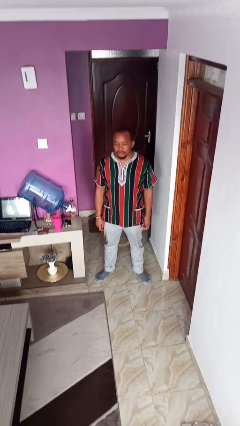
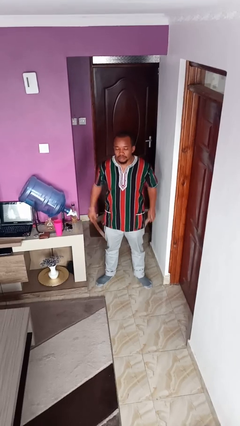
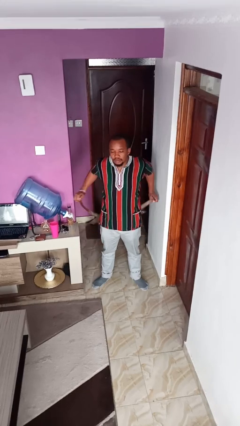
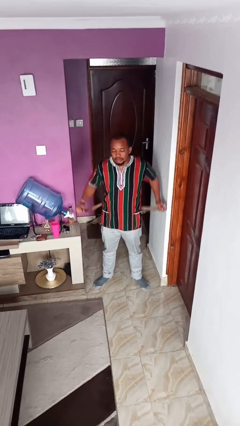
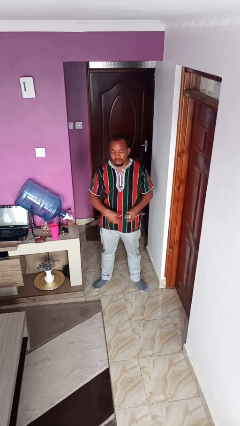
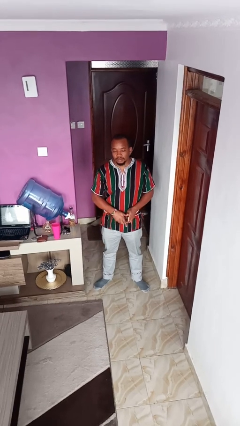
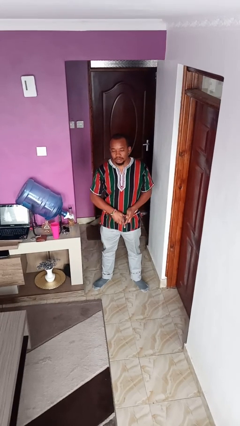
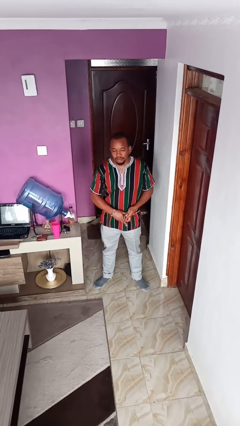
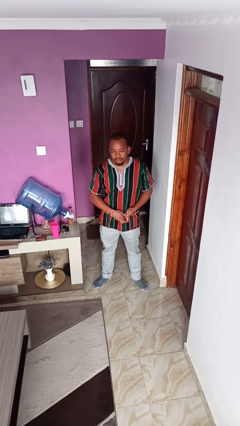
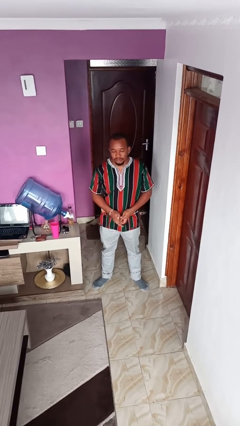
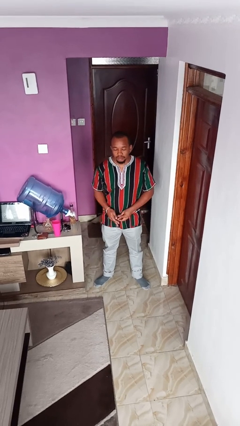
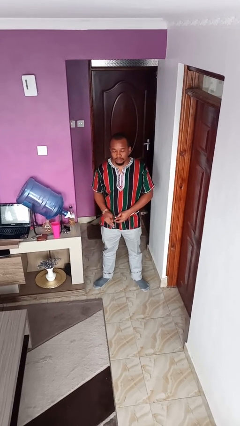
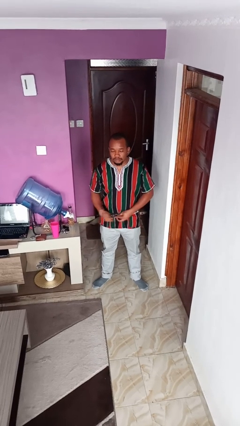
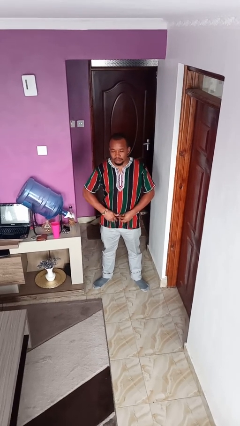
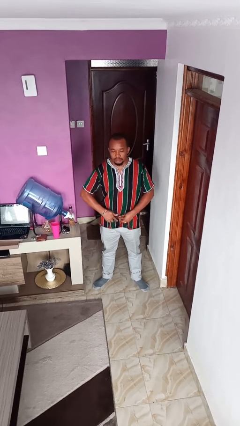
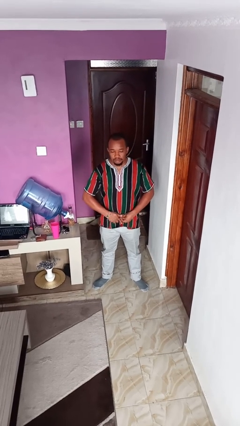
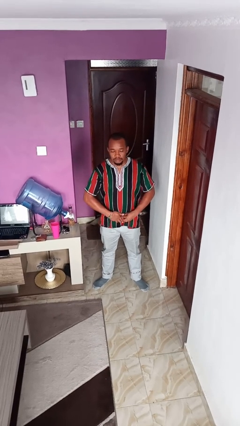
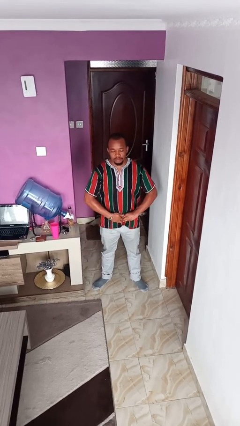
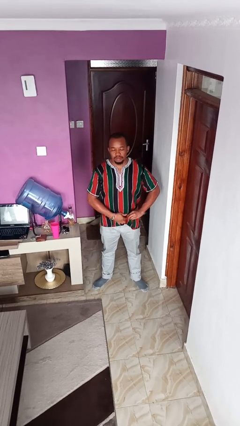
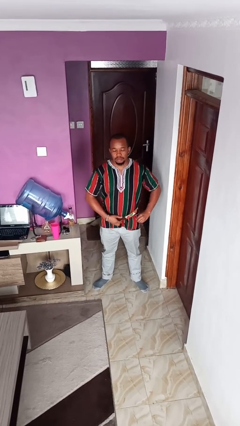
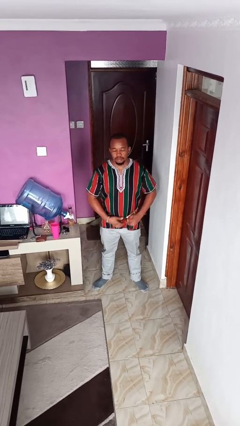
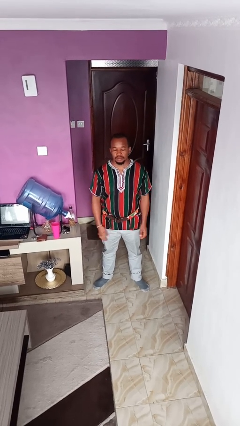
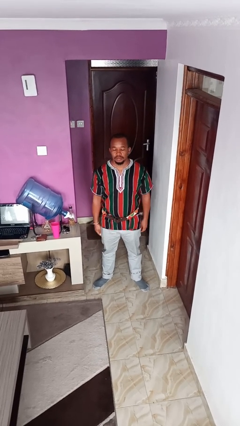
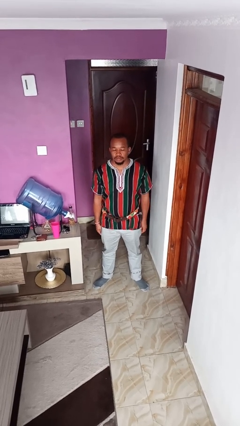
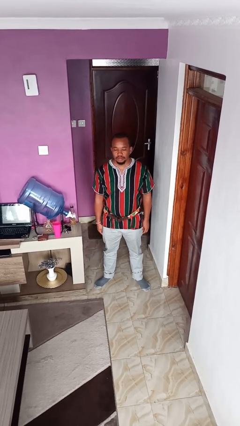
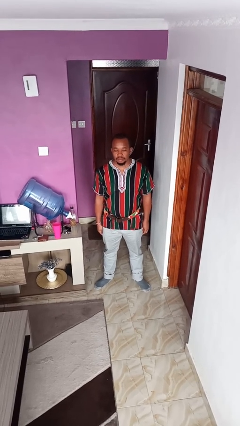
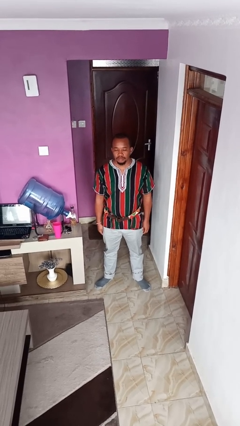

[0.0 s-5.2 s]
person puts on belt

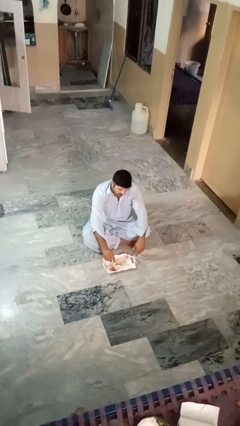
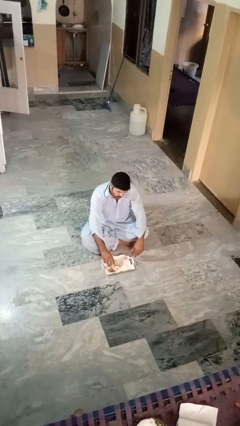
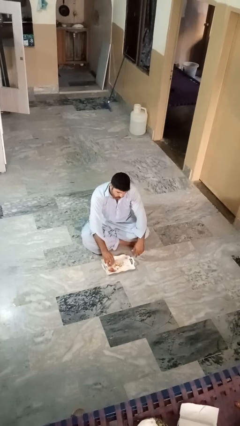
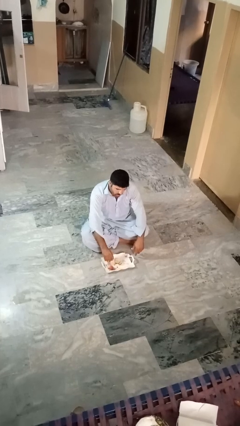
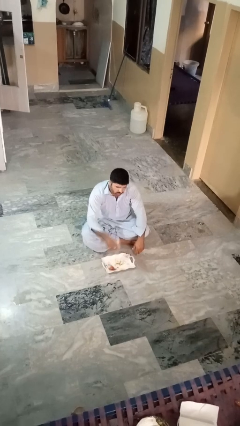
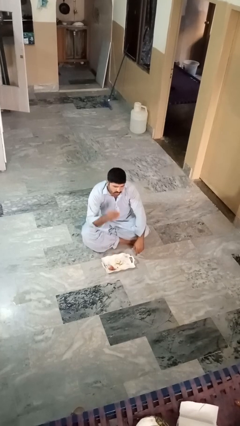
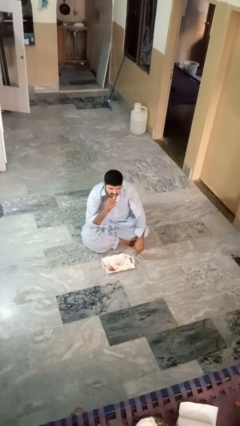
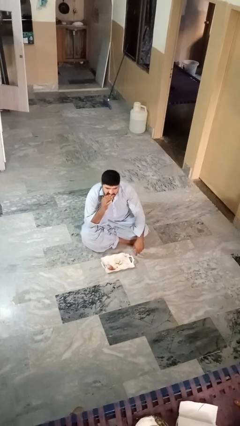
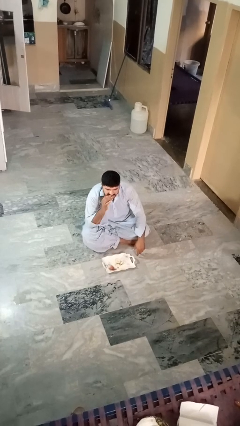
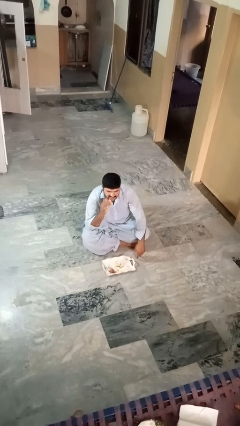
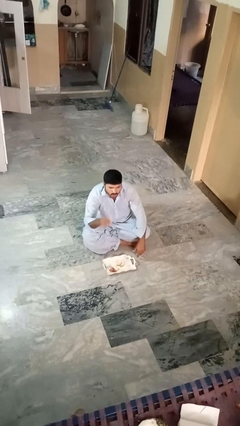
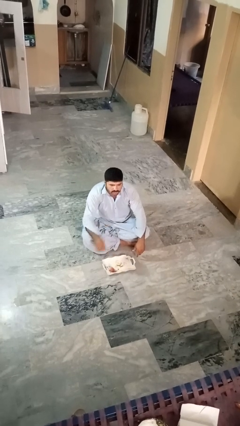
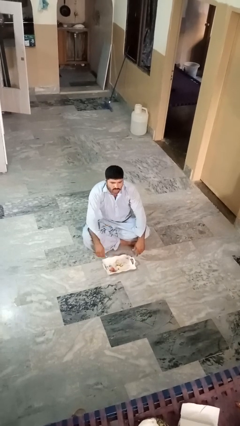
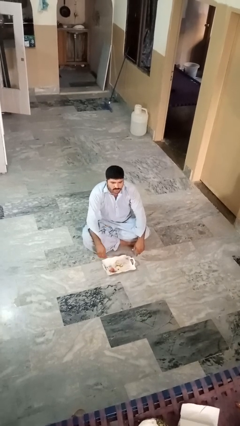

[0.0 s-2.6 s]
person eats apple

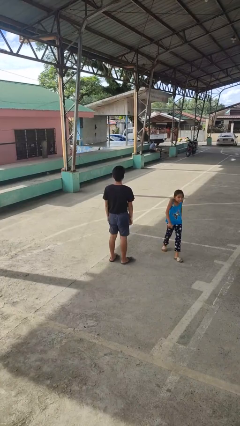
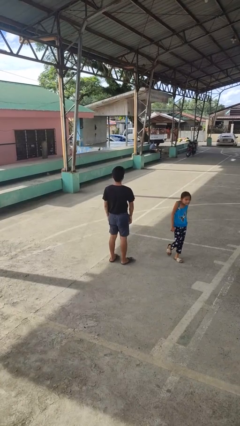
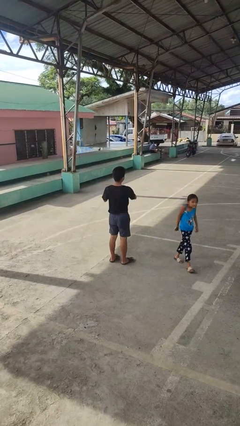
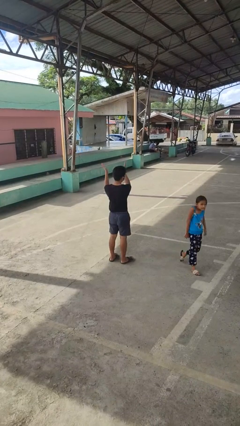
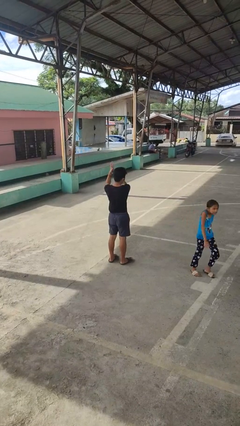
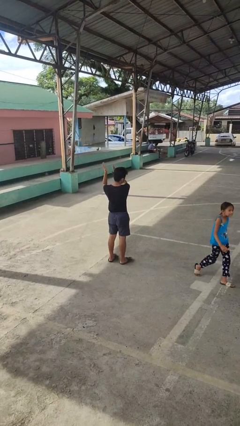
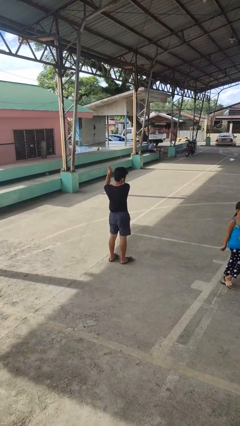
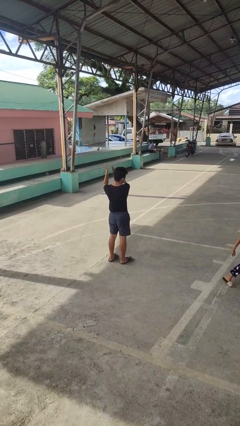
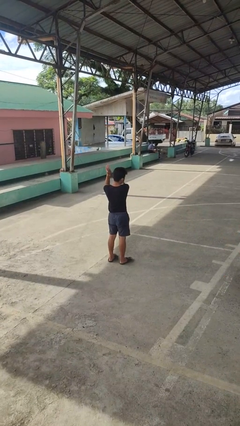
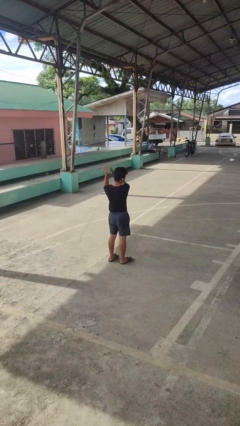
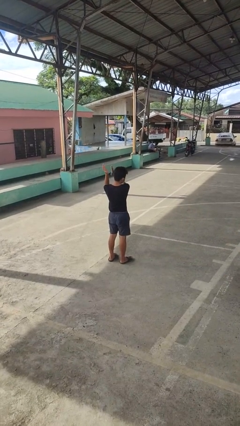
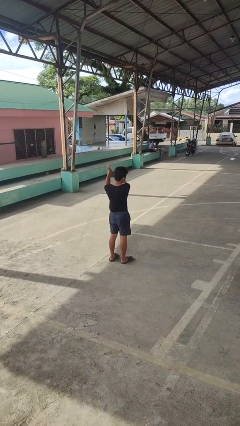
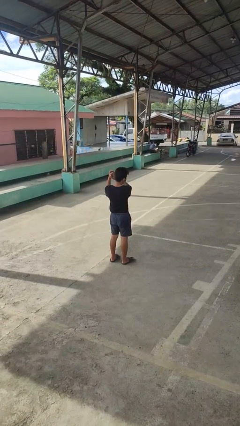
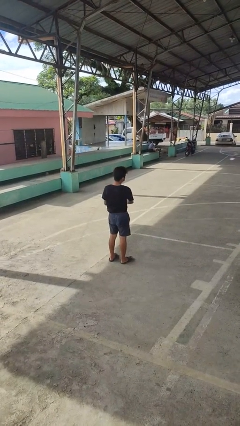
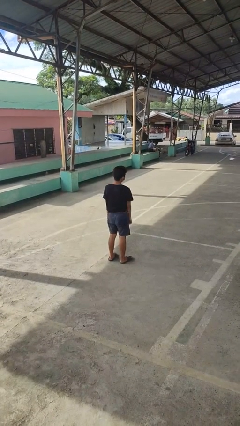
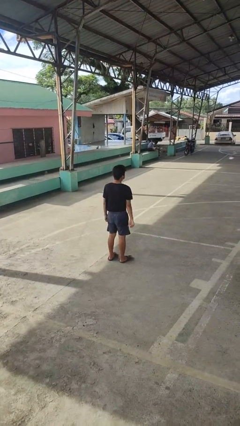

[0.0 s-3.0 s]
person claps hands

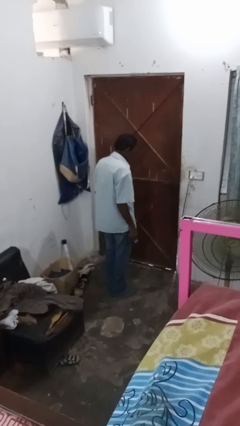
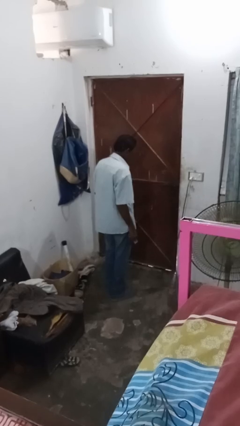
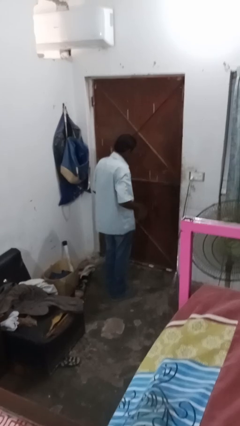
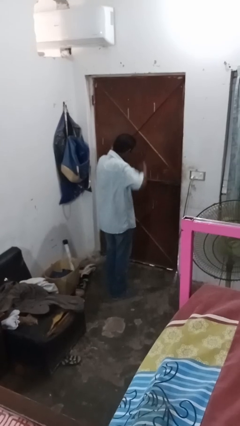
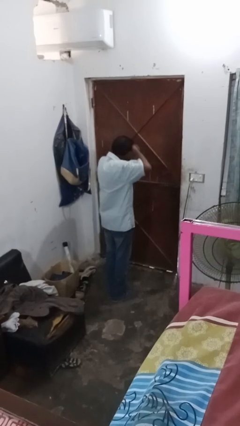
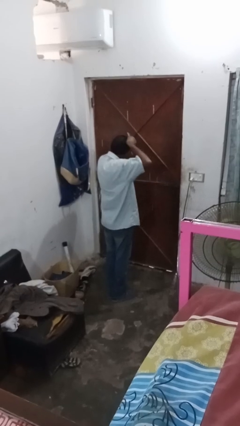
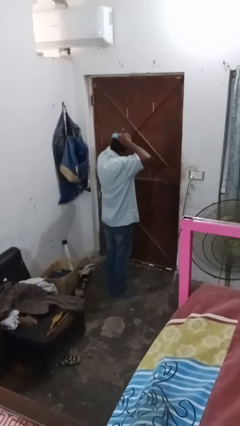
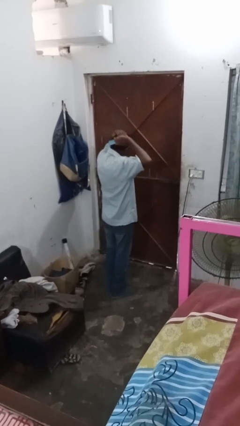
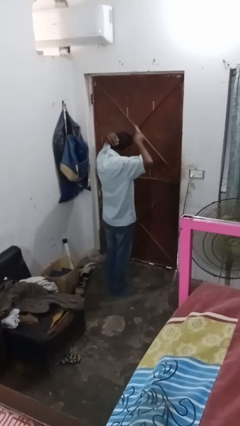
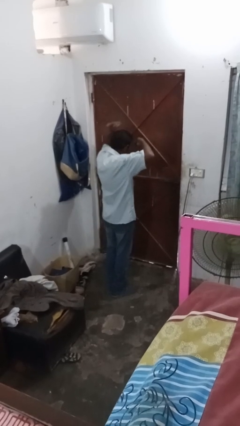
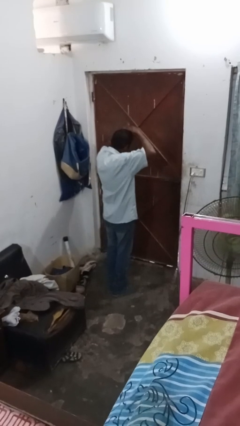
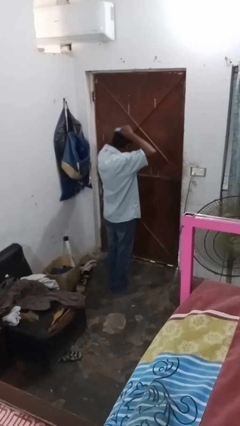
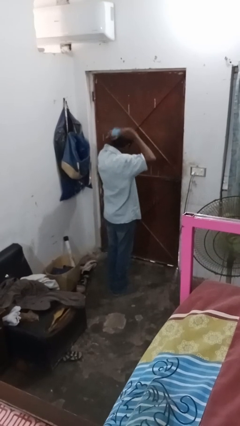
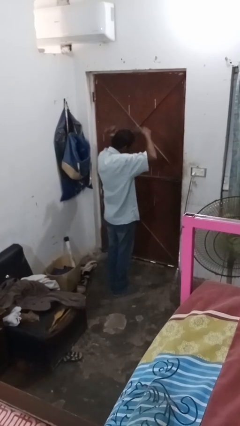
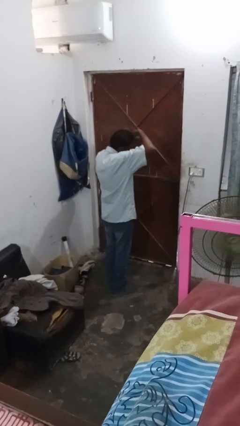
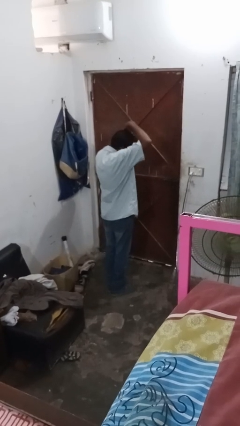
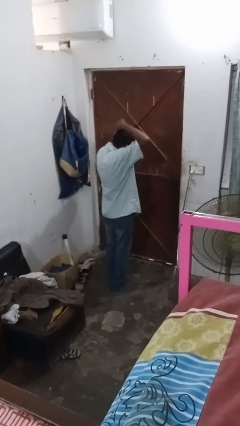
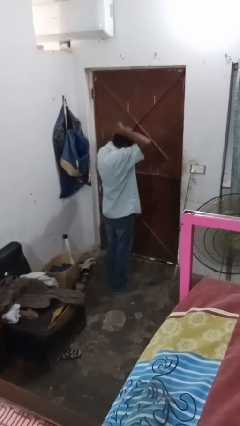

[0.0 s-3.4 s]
person brushes hair

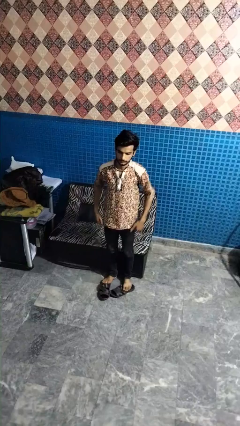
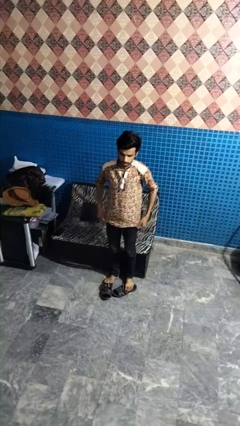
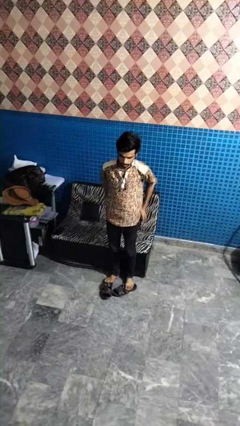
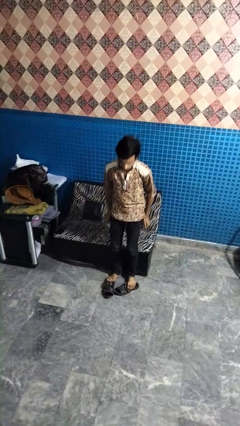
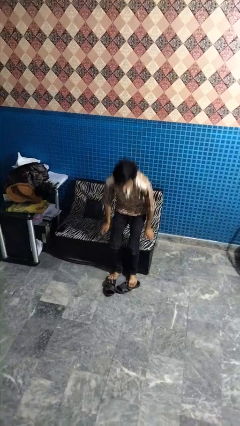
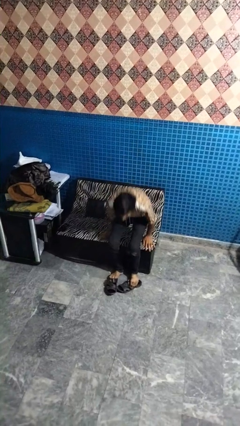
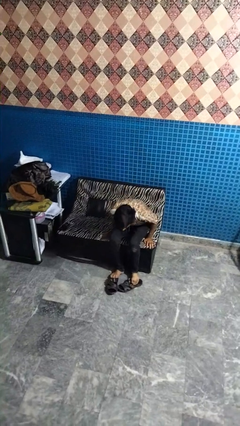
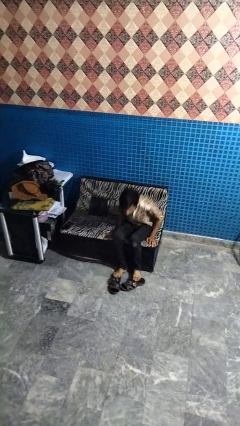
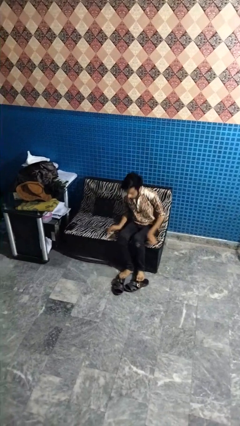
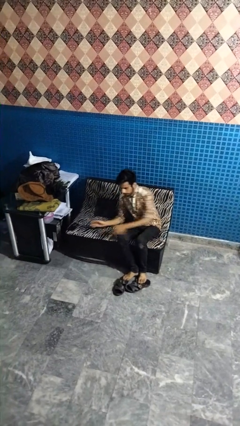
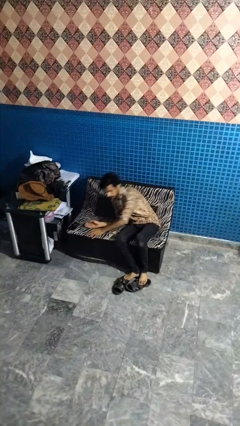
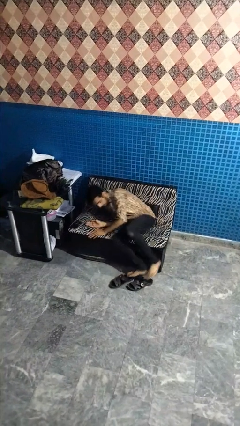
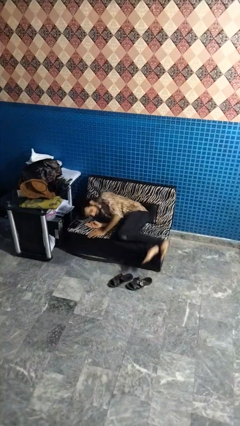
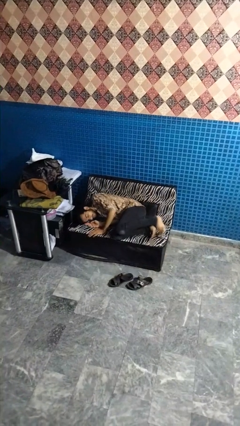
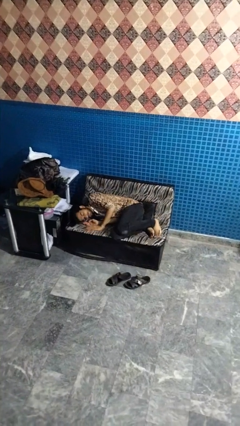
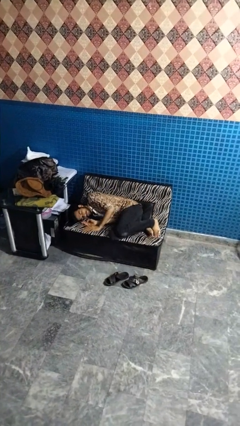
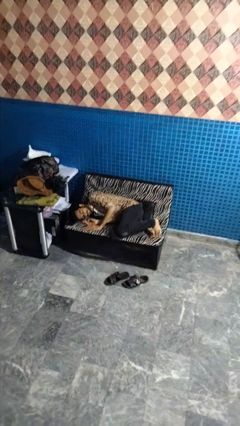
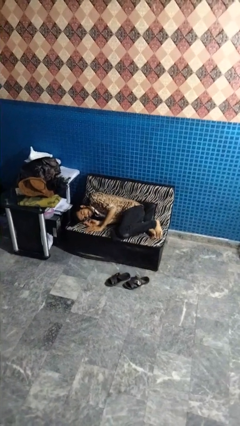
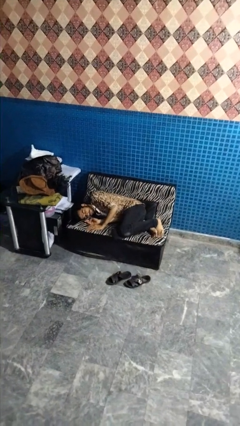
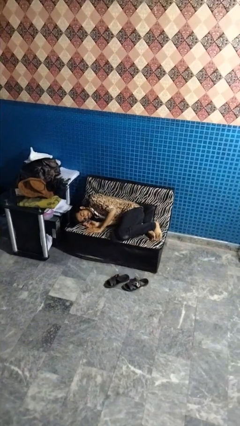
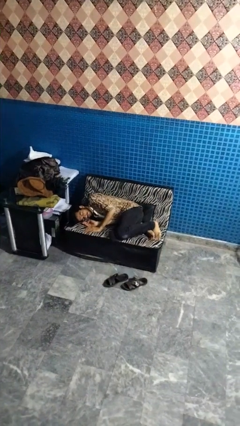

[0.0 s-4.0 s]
person lies down on couch
